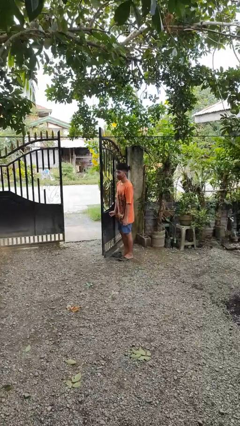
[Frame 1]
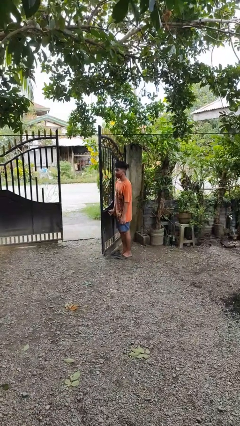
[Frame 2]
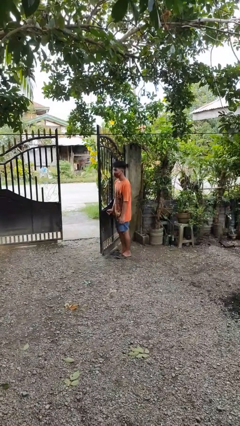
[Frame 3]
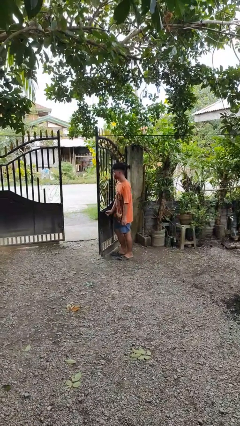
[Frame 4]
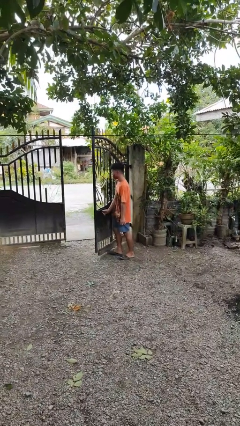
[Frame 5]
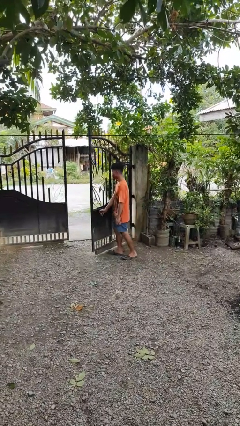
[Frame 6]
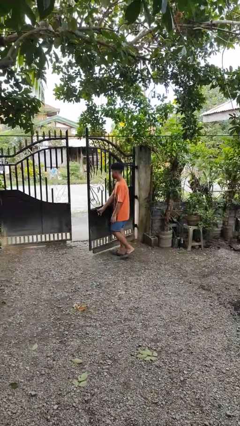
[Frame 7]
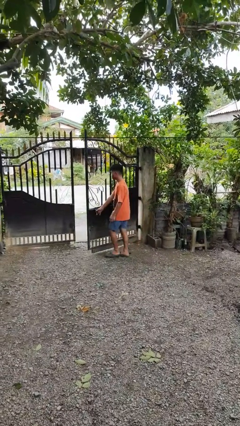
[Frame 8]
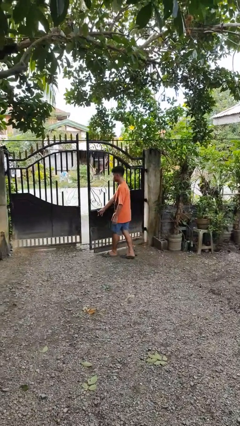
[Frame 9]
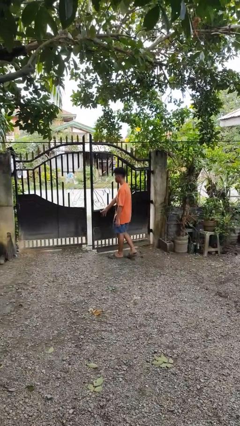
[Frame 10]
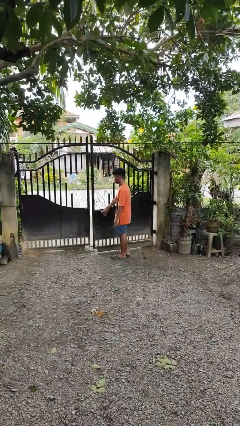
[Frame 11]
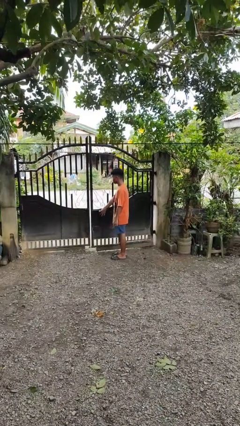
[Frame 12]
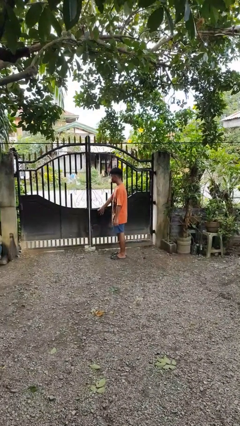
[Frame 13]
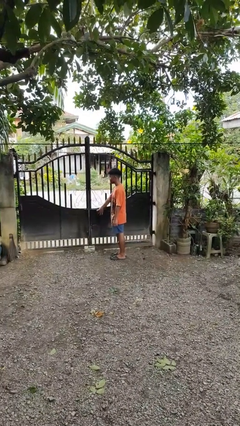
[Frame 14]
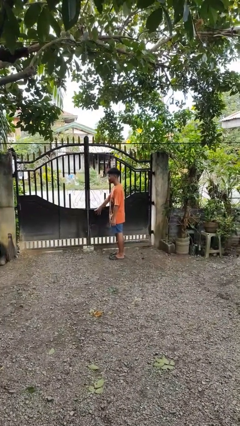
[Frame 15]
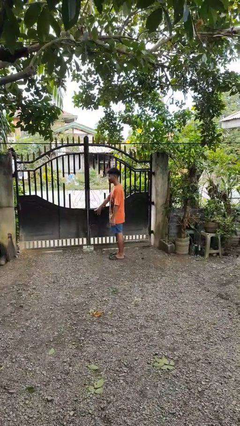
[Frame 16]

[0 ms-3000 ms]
person closes gate

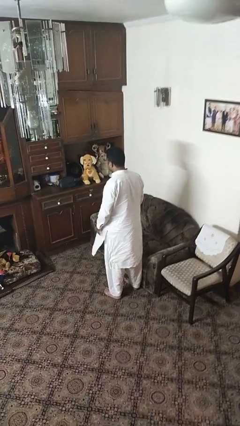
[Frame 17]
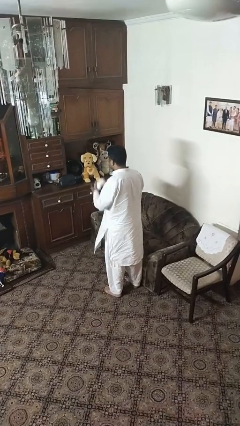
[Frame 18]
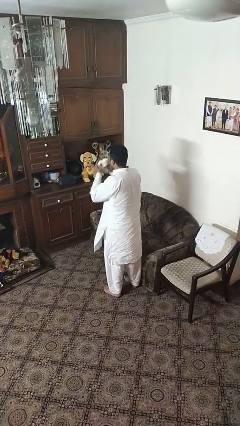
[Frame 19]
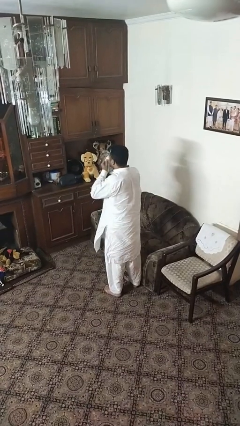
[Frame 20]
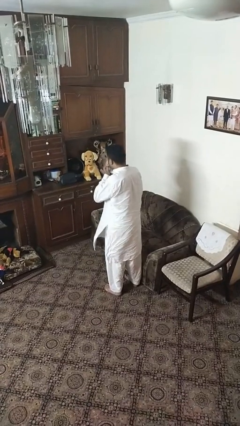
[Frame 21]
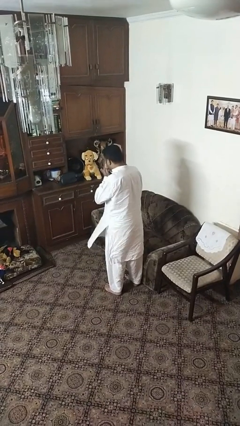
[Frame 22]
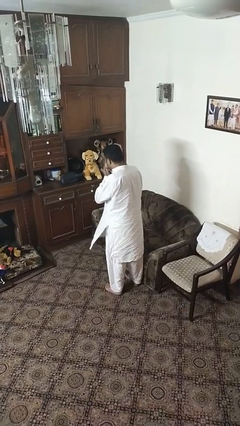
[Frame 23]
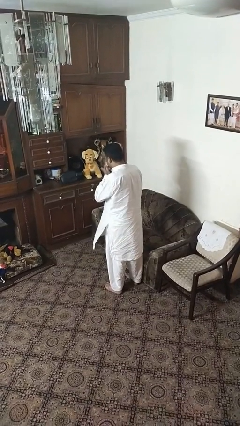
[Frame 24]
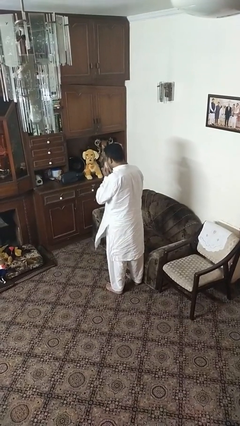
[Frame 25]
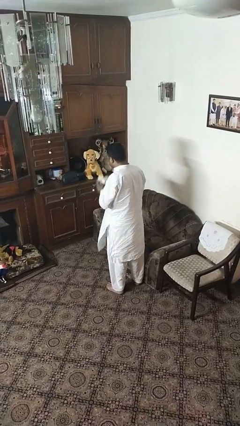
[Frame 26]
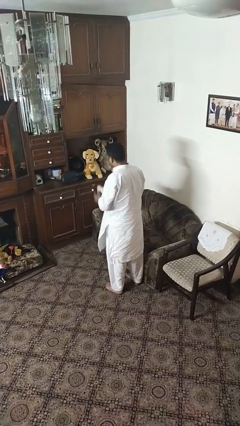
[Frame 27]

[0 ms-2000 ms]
person blows nose

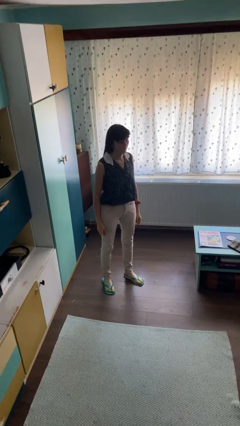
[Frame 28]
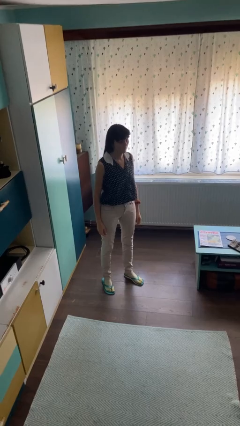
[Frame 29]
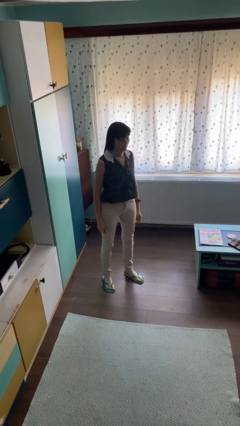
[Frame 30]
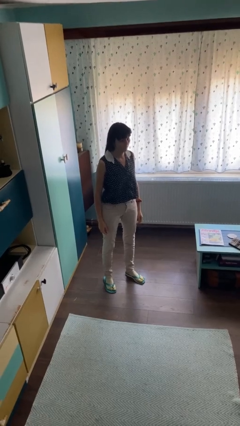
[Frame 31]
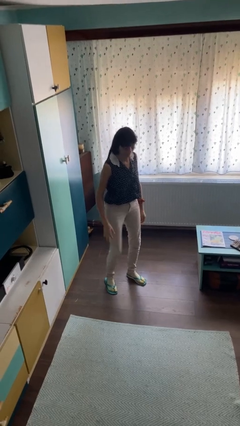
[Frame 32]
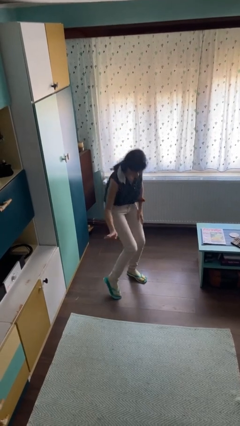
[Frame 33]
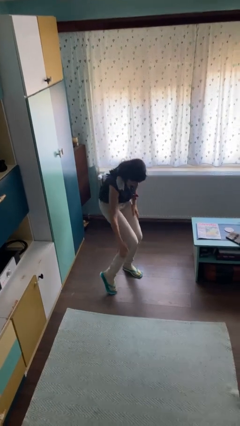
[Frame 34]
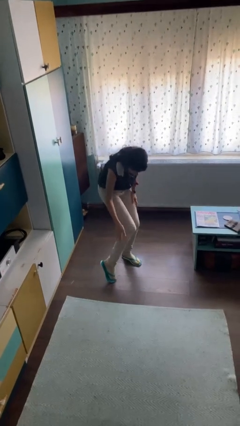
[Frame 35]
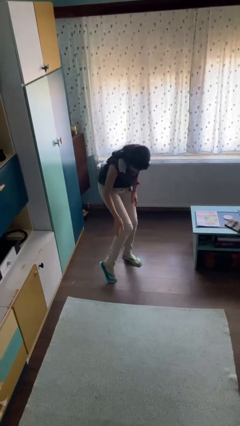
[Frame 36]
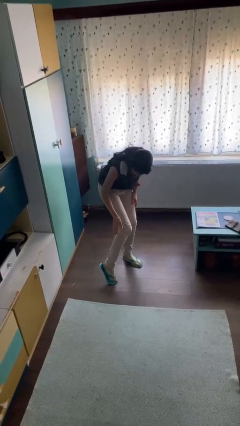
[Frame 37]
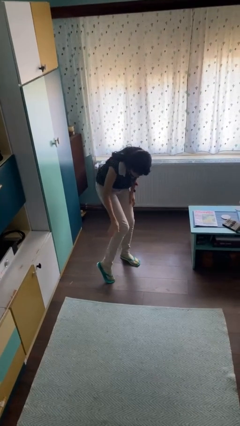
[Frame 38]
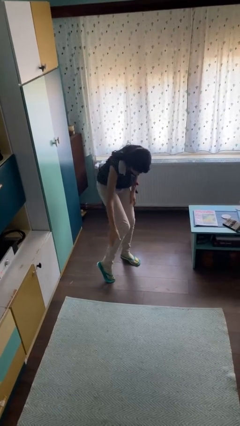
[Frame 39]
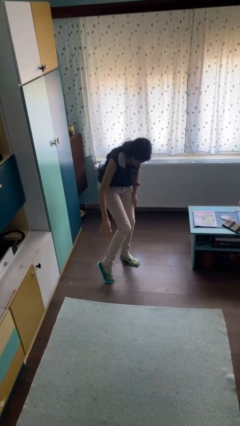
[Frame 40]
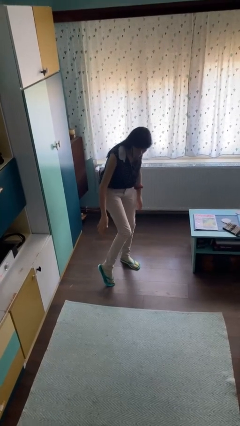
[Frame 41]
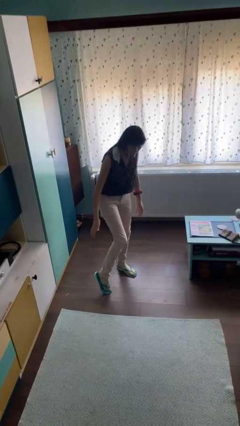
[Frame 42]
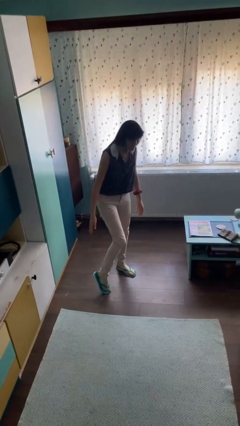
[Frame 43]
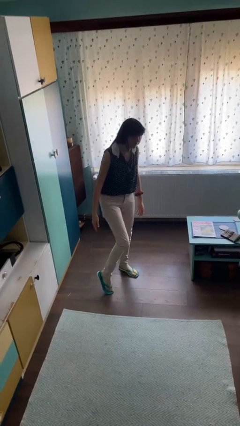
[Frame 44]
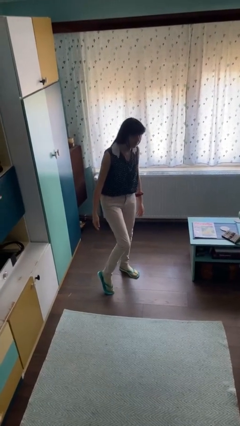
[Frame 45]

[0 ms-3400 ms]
person swats bug

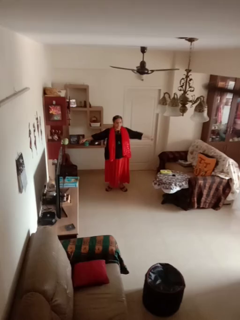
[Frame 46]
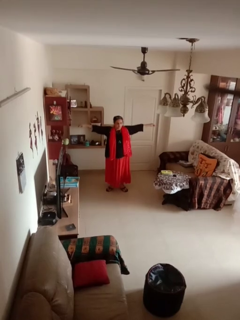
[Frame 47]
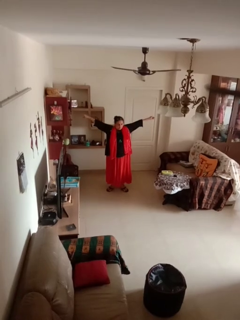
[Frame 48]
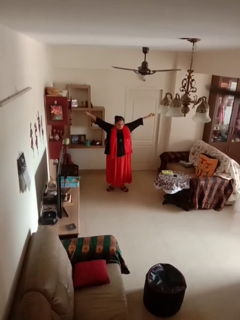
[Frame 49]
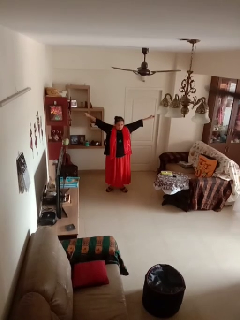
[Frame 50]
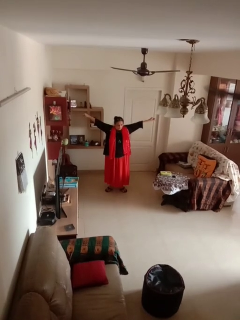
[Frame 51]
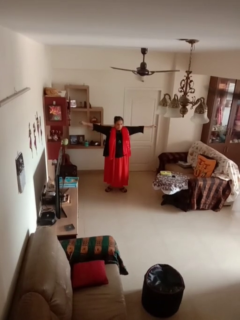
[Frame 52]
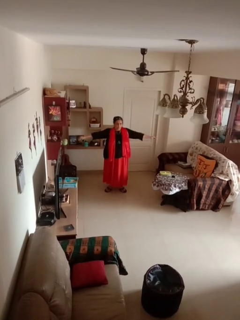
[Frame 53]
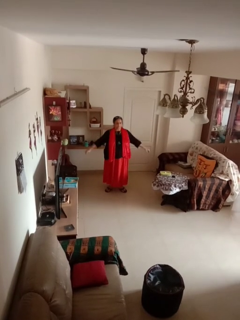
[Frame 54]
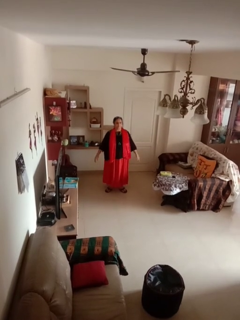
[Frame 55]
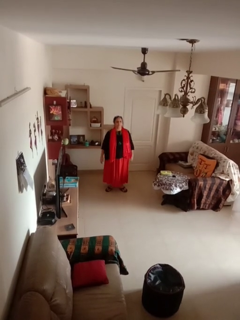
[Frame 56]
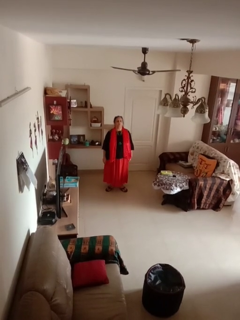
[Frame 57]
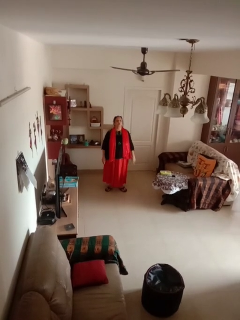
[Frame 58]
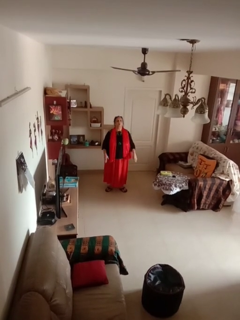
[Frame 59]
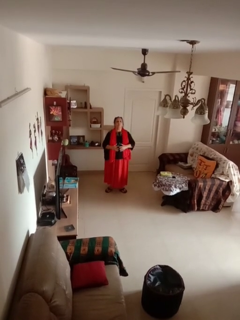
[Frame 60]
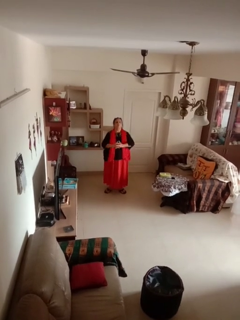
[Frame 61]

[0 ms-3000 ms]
person stretches arms to side

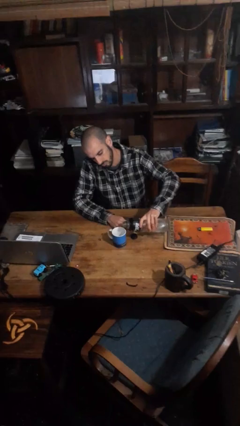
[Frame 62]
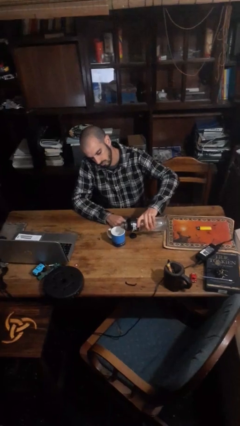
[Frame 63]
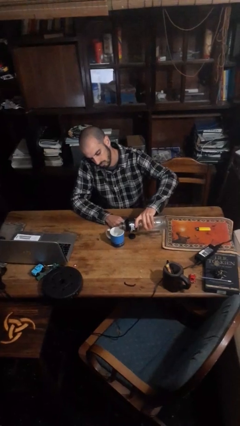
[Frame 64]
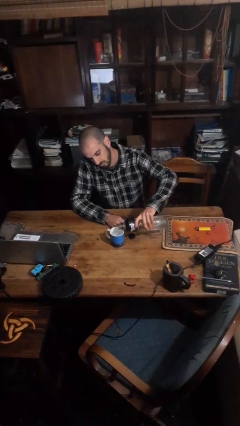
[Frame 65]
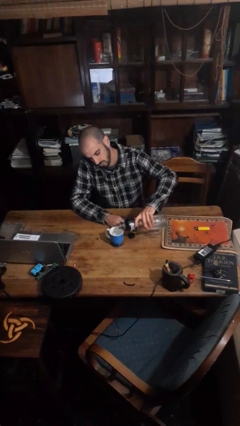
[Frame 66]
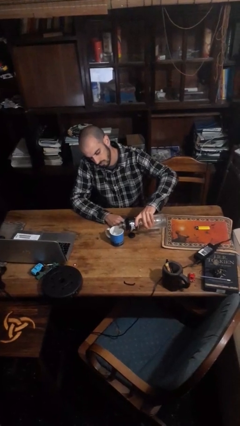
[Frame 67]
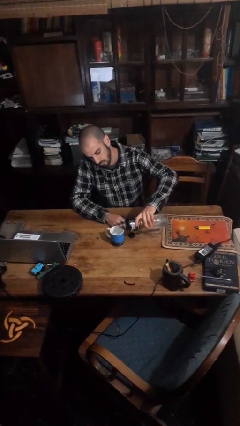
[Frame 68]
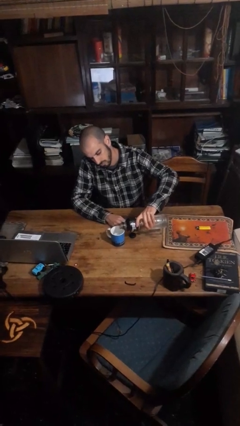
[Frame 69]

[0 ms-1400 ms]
person pours liquid into cup

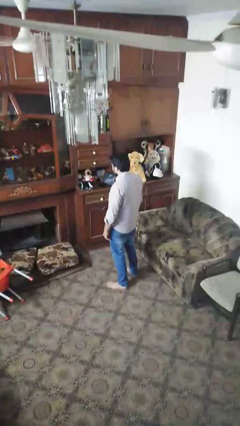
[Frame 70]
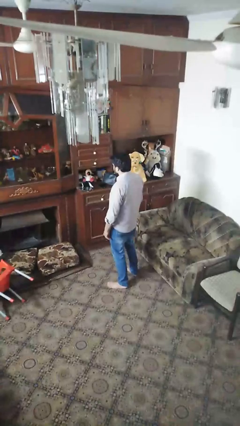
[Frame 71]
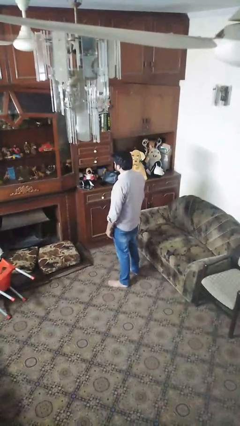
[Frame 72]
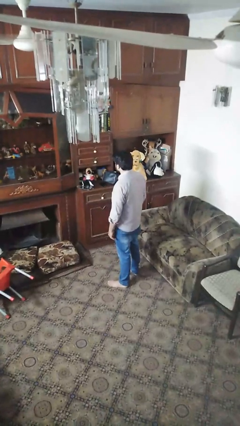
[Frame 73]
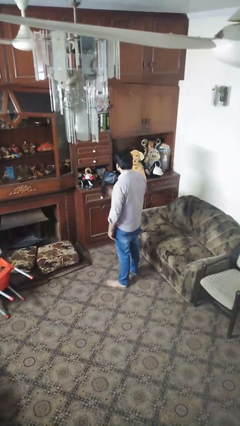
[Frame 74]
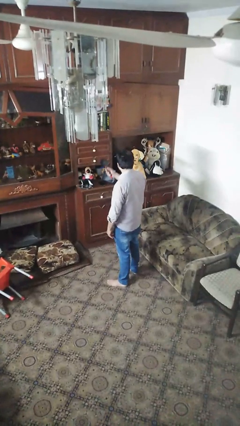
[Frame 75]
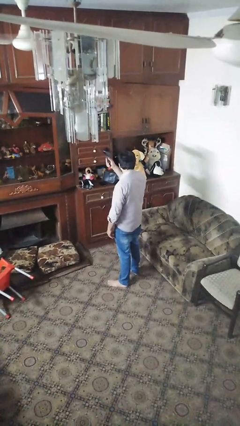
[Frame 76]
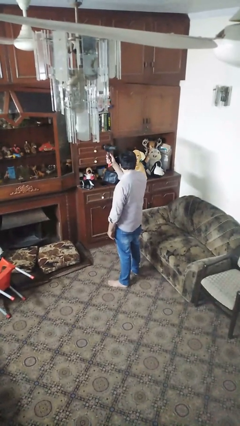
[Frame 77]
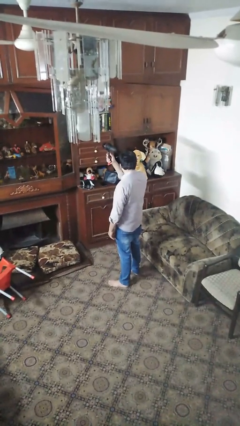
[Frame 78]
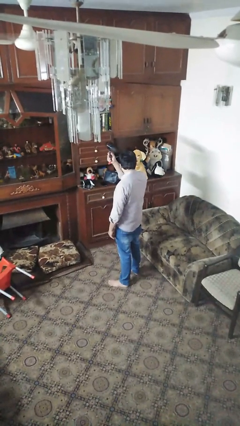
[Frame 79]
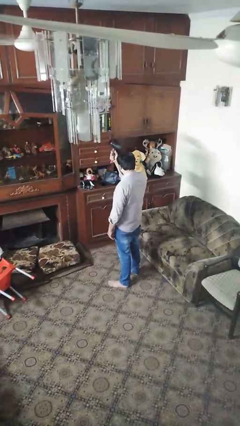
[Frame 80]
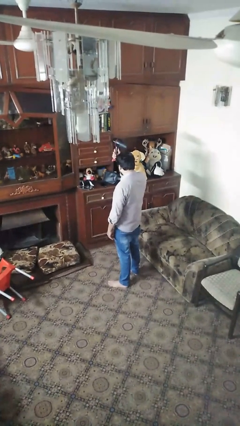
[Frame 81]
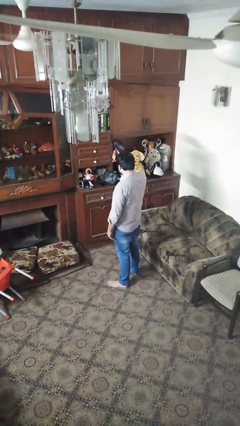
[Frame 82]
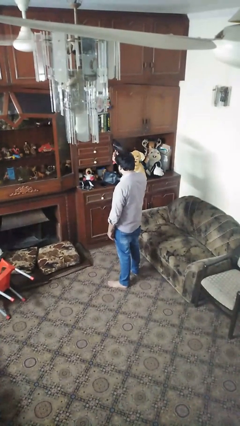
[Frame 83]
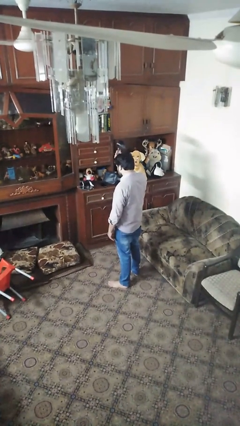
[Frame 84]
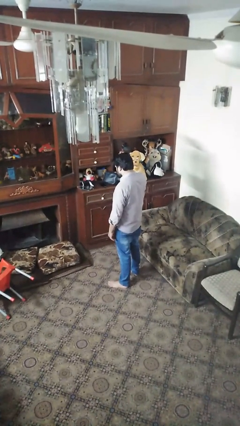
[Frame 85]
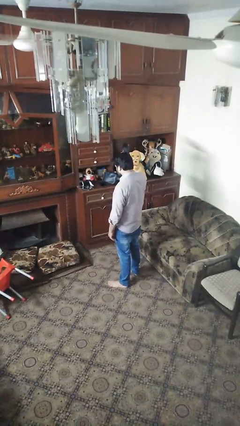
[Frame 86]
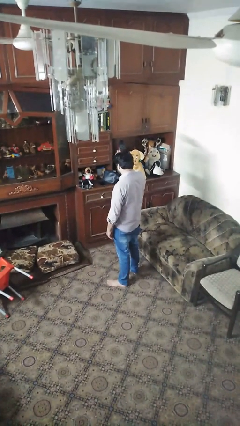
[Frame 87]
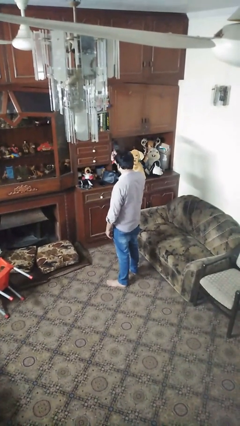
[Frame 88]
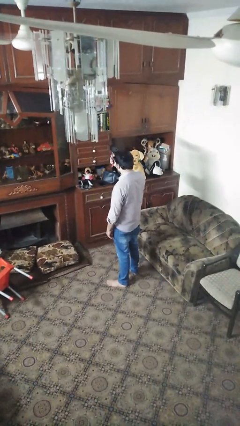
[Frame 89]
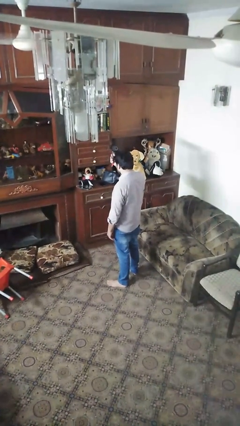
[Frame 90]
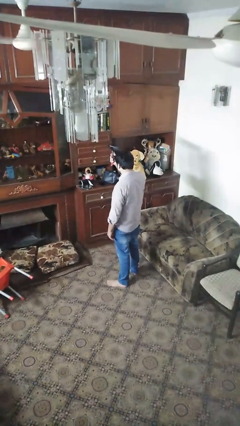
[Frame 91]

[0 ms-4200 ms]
person dries hair with hairdryer

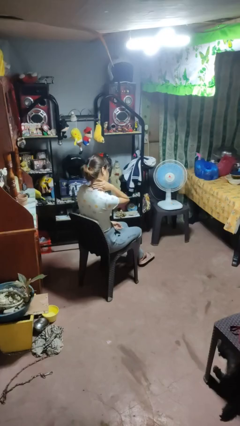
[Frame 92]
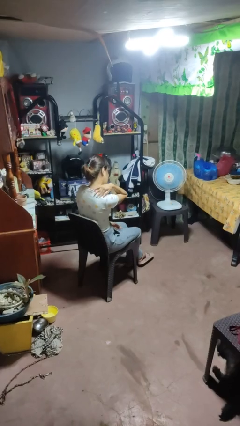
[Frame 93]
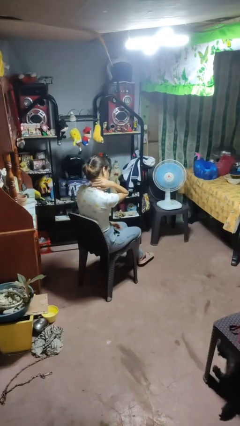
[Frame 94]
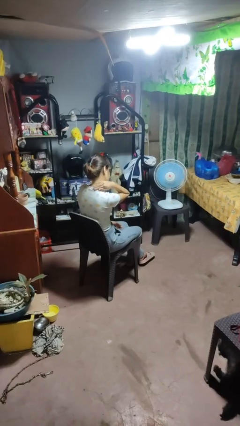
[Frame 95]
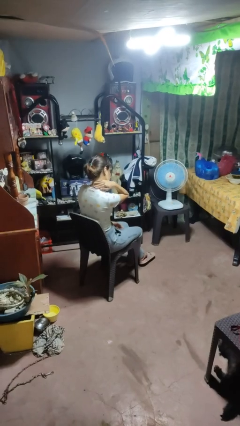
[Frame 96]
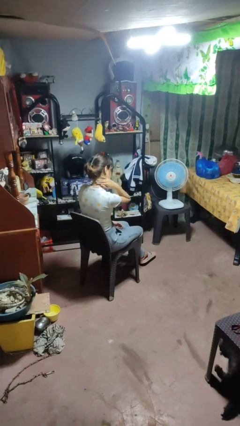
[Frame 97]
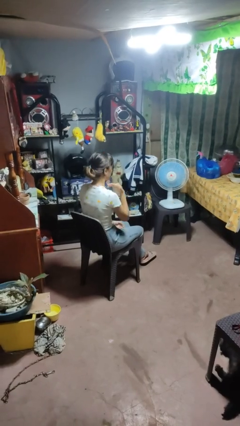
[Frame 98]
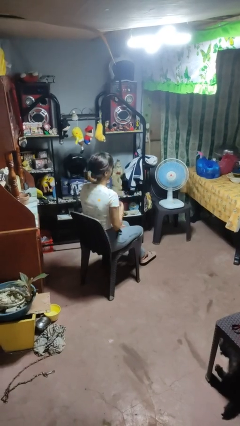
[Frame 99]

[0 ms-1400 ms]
person rubs neck
